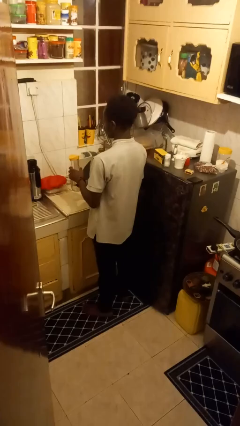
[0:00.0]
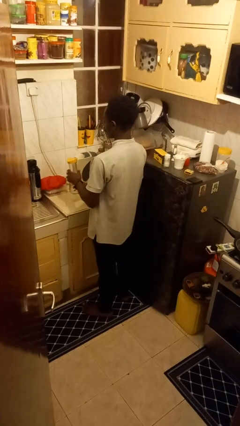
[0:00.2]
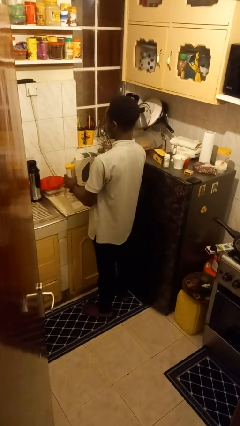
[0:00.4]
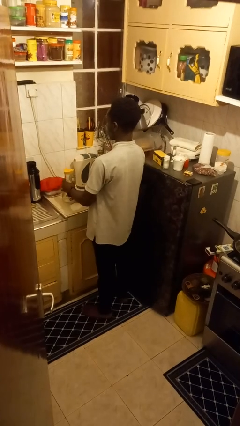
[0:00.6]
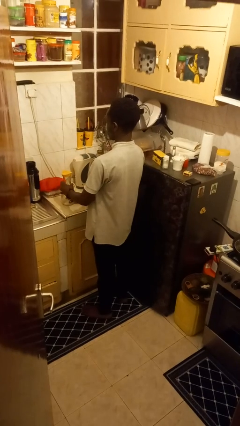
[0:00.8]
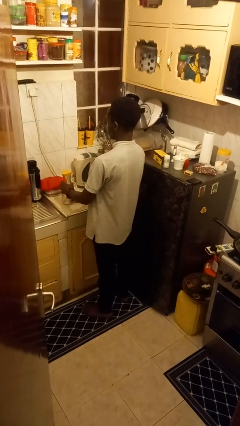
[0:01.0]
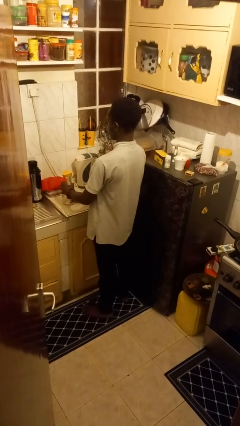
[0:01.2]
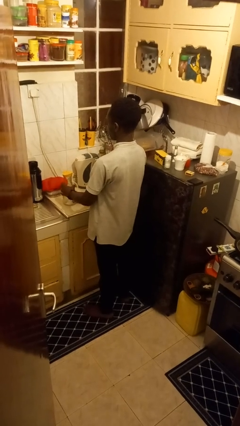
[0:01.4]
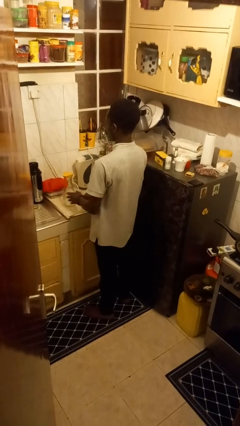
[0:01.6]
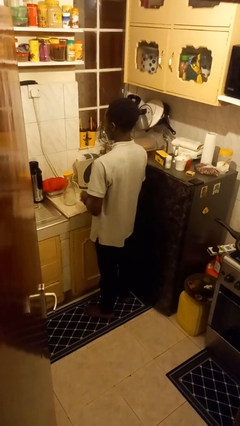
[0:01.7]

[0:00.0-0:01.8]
person puts down object on countertop

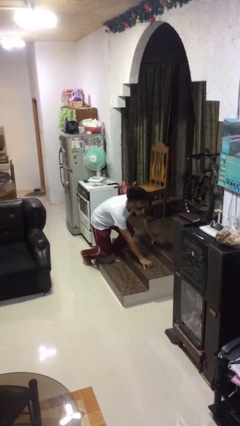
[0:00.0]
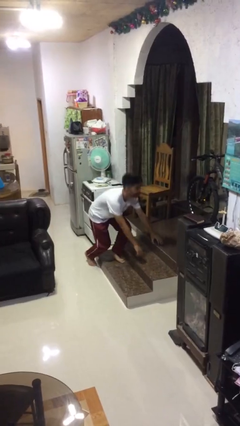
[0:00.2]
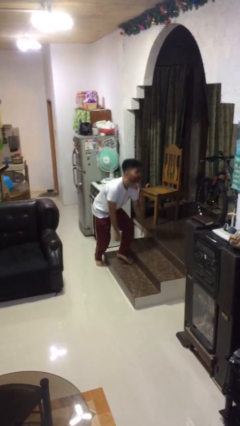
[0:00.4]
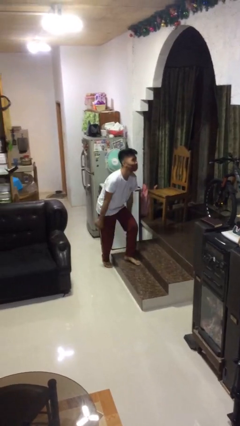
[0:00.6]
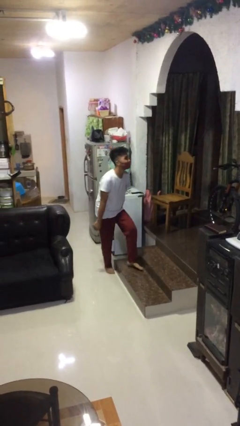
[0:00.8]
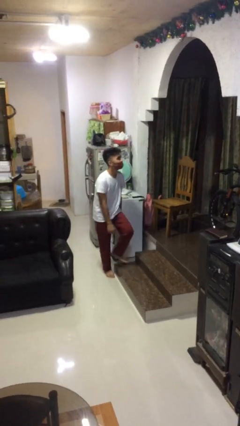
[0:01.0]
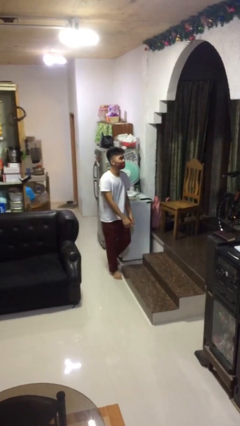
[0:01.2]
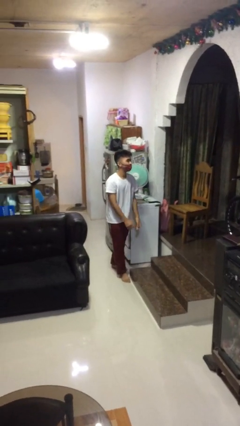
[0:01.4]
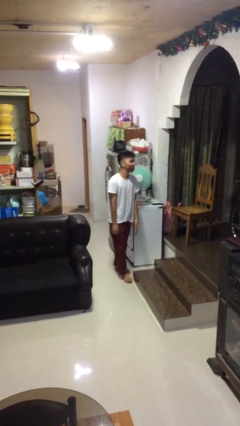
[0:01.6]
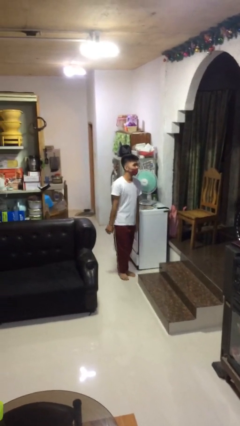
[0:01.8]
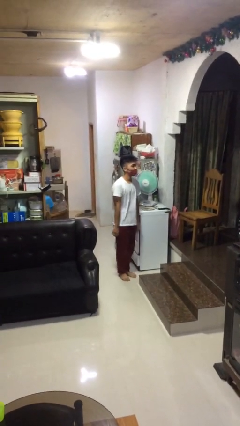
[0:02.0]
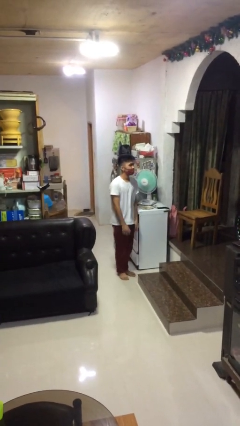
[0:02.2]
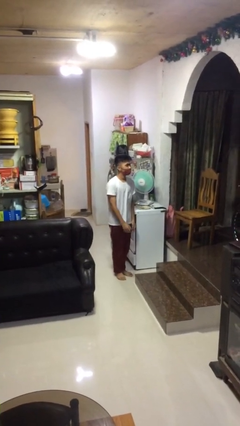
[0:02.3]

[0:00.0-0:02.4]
person stands up from floor

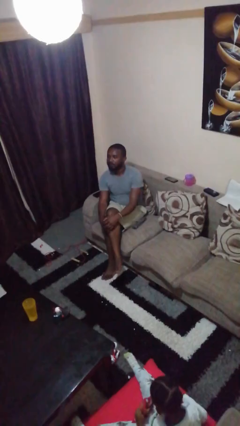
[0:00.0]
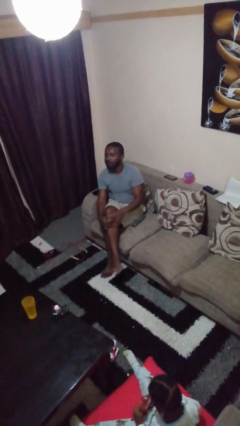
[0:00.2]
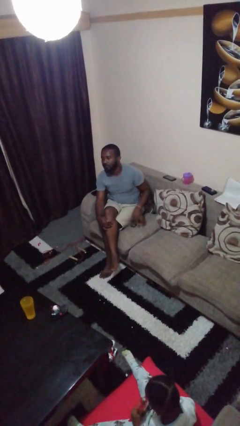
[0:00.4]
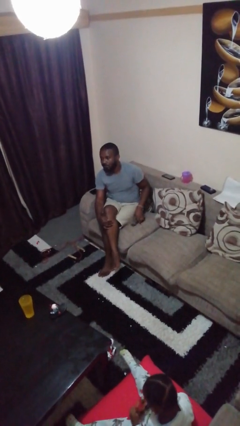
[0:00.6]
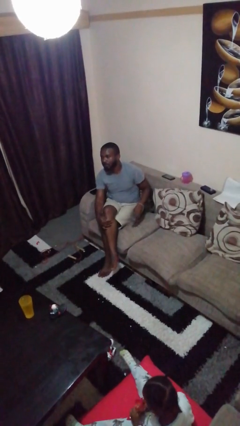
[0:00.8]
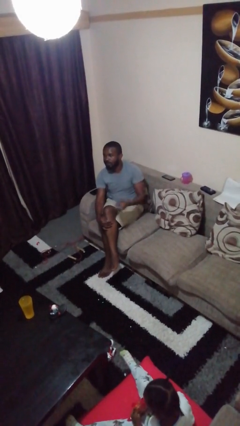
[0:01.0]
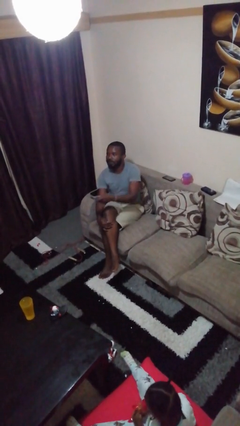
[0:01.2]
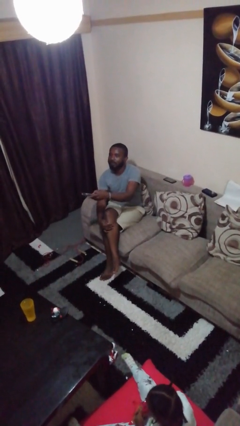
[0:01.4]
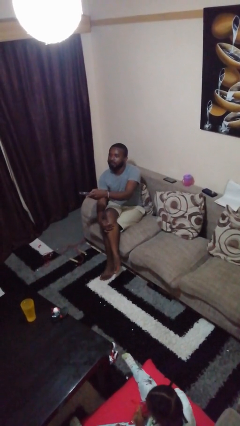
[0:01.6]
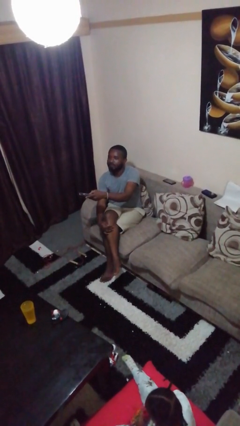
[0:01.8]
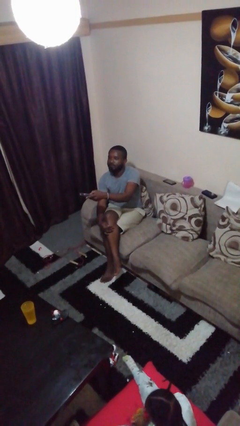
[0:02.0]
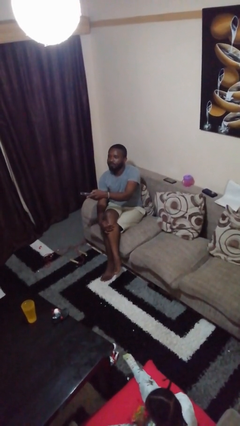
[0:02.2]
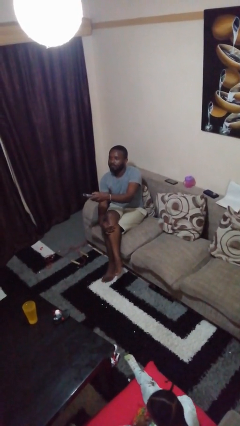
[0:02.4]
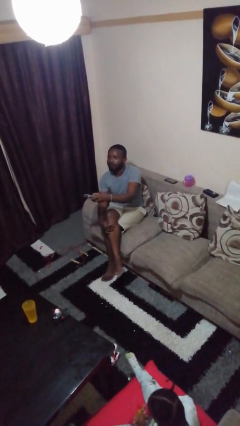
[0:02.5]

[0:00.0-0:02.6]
person uses television remote

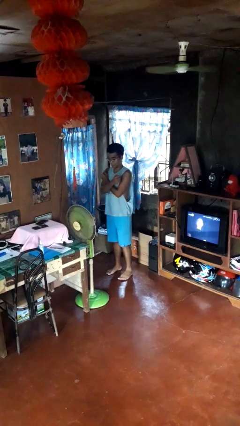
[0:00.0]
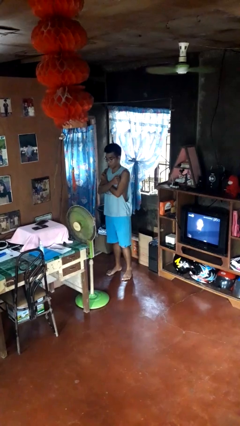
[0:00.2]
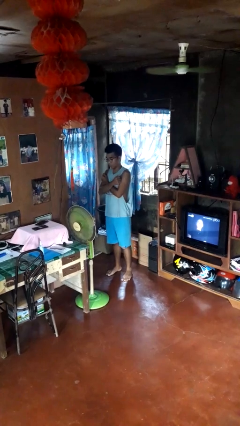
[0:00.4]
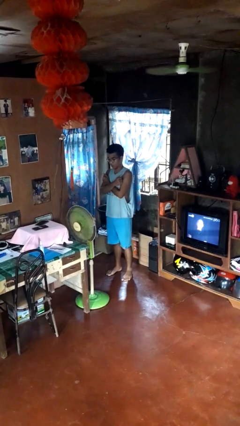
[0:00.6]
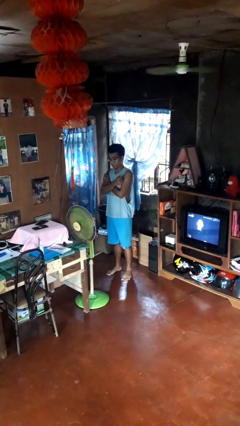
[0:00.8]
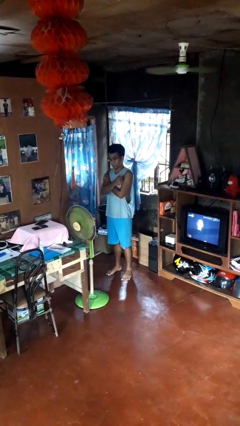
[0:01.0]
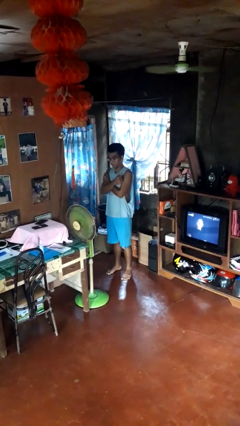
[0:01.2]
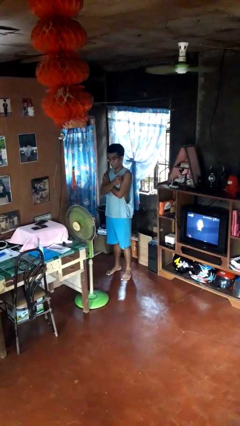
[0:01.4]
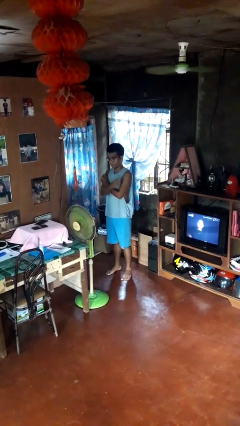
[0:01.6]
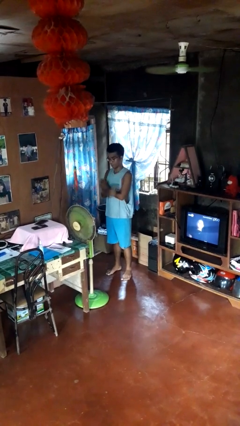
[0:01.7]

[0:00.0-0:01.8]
person gestures arms x

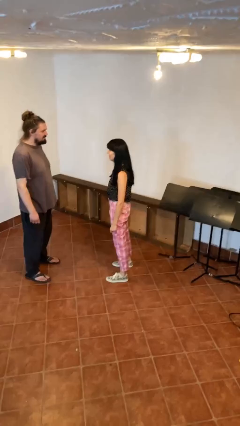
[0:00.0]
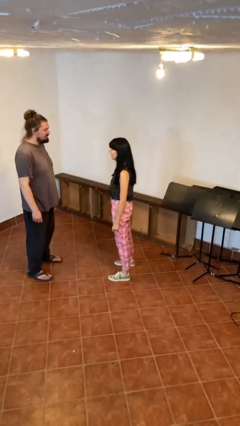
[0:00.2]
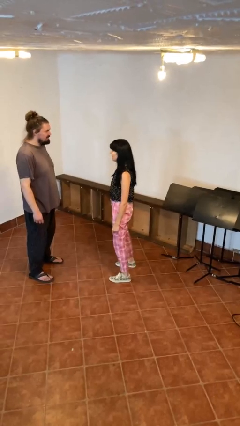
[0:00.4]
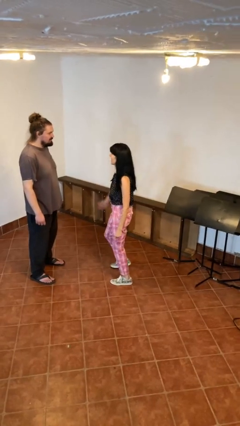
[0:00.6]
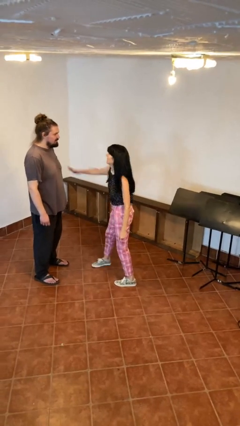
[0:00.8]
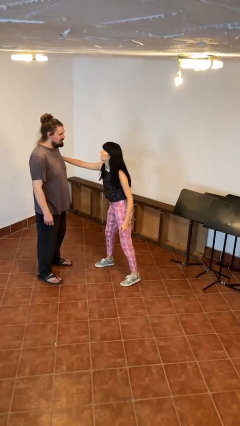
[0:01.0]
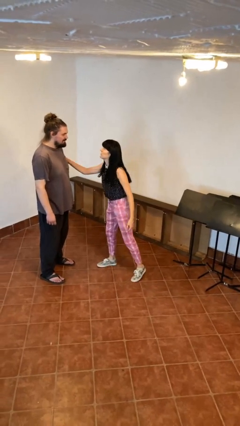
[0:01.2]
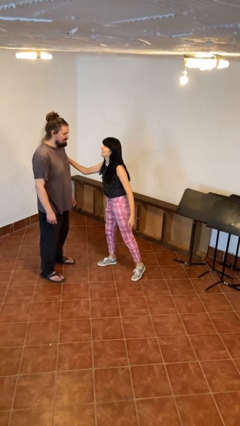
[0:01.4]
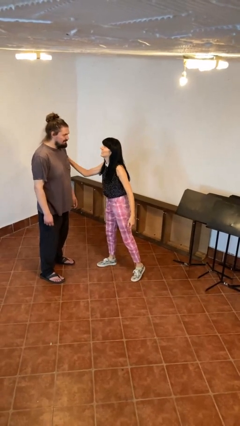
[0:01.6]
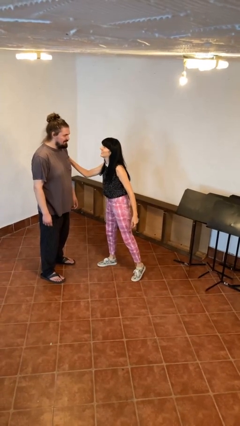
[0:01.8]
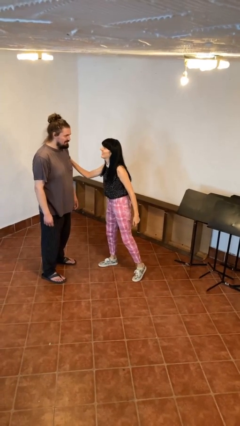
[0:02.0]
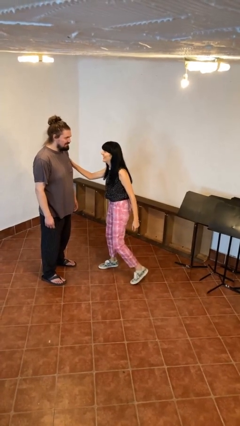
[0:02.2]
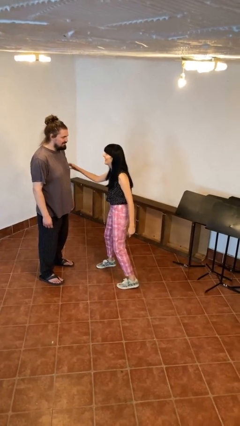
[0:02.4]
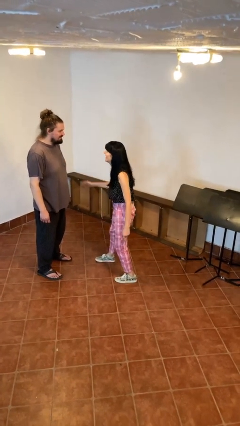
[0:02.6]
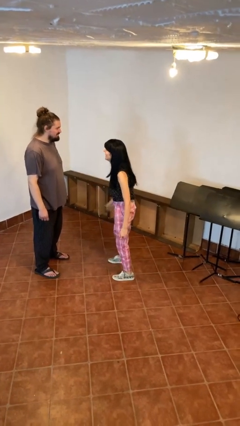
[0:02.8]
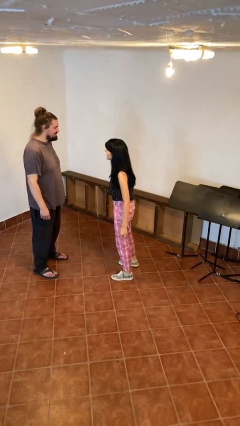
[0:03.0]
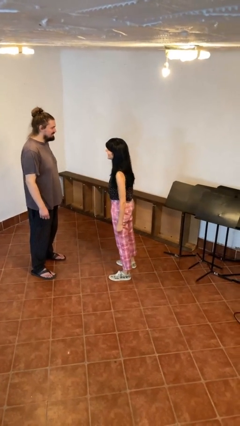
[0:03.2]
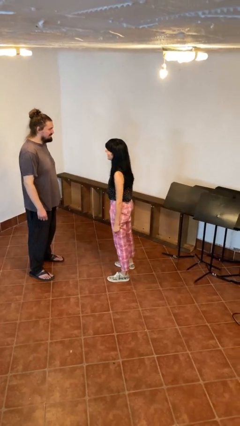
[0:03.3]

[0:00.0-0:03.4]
person grabs person by bicep

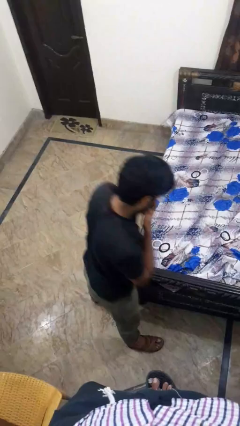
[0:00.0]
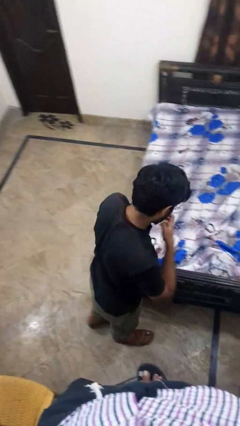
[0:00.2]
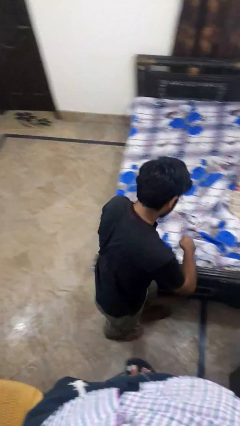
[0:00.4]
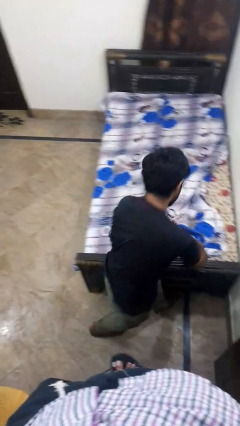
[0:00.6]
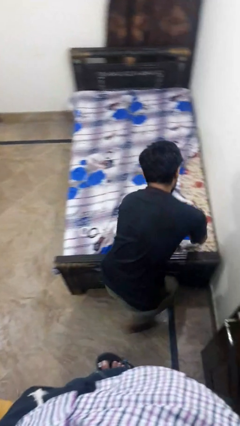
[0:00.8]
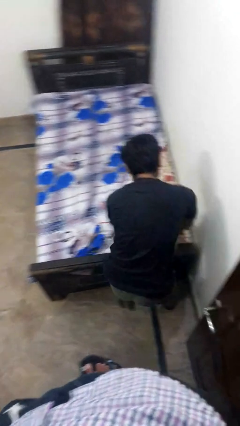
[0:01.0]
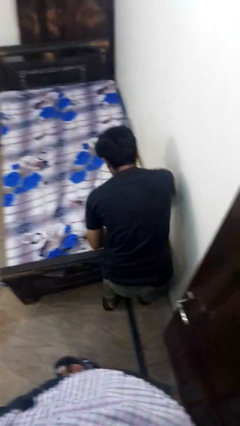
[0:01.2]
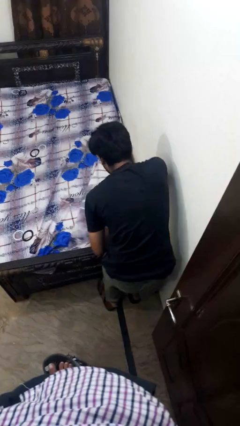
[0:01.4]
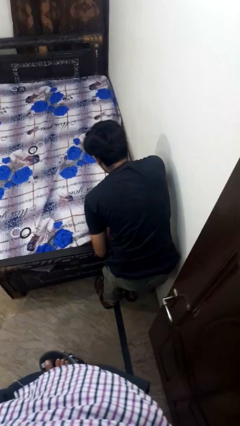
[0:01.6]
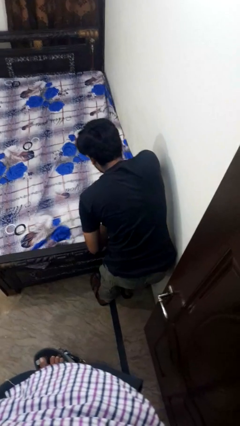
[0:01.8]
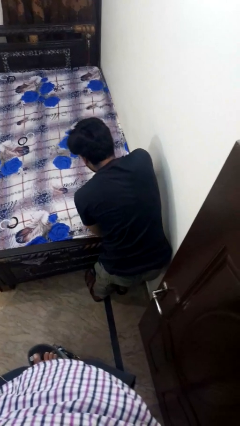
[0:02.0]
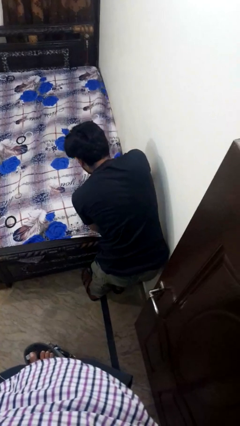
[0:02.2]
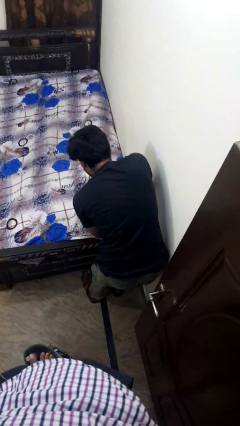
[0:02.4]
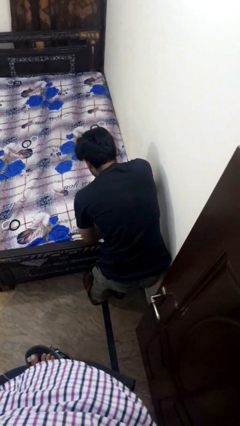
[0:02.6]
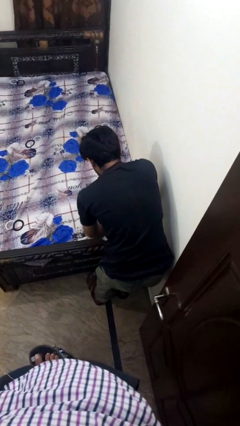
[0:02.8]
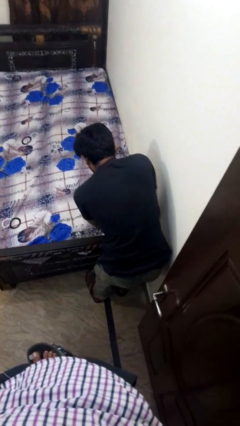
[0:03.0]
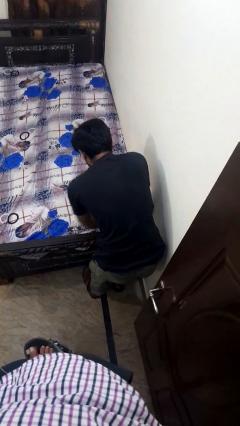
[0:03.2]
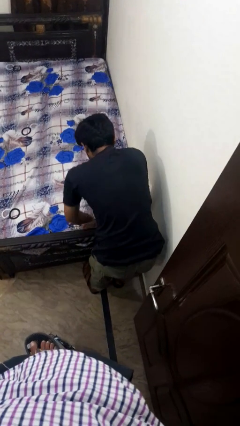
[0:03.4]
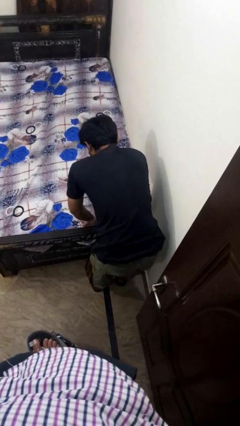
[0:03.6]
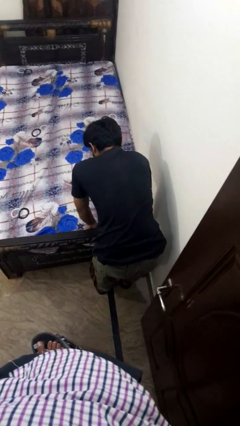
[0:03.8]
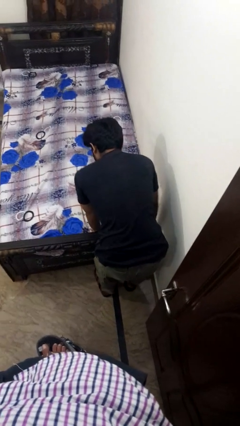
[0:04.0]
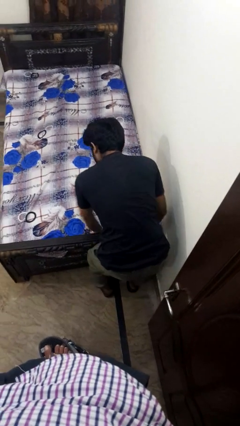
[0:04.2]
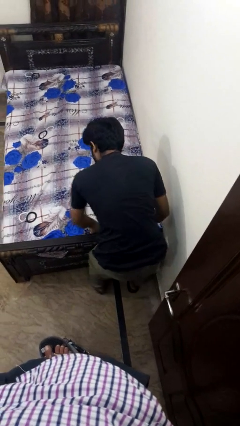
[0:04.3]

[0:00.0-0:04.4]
person makes bed

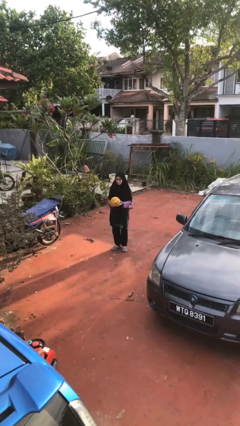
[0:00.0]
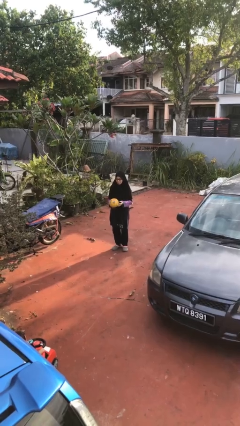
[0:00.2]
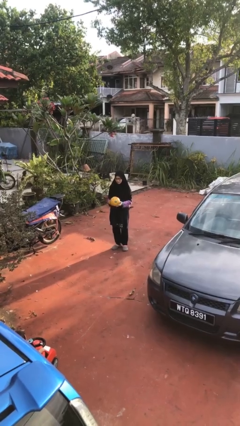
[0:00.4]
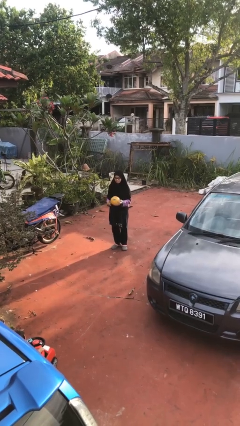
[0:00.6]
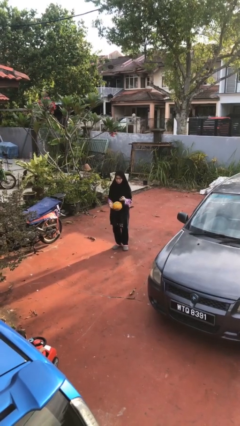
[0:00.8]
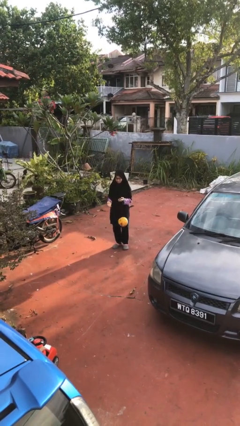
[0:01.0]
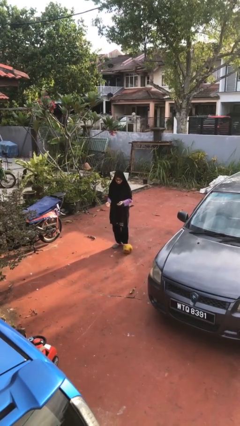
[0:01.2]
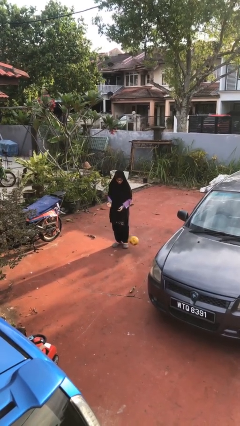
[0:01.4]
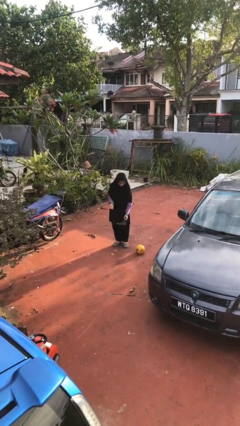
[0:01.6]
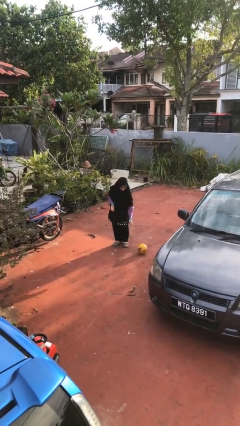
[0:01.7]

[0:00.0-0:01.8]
person drops object
